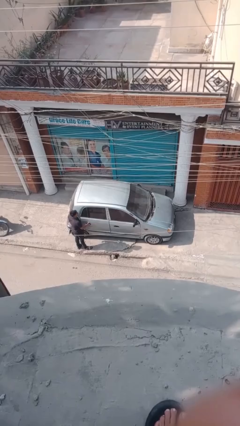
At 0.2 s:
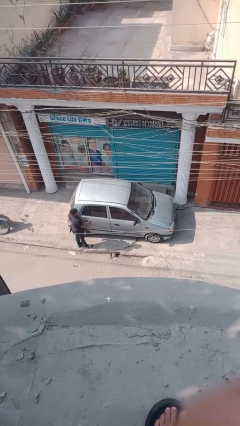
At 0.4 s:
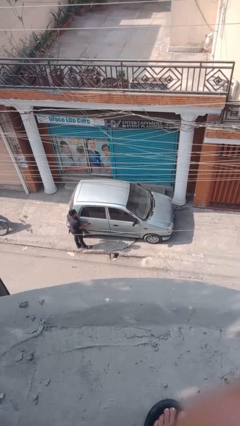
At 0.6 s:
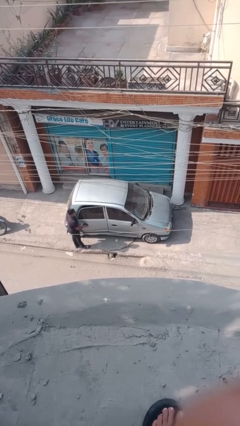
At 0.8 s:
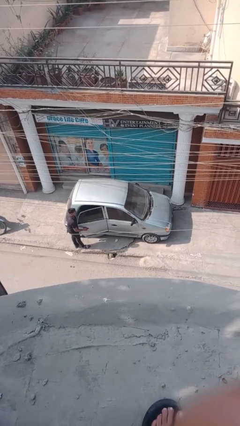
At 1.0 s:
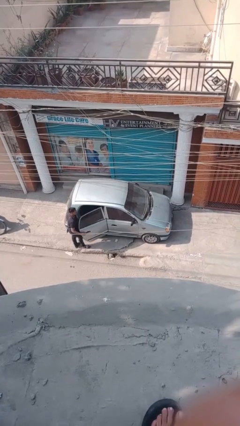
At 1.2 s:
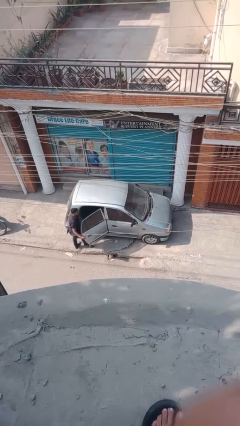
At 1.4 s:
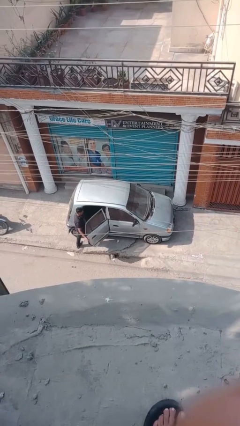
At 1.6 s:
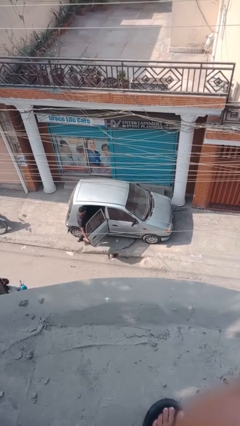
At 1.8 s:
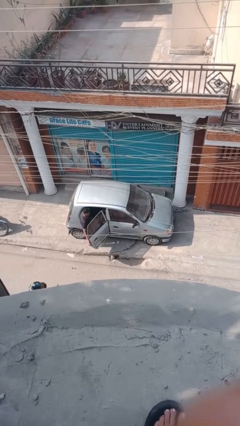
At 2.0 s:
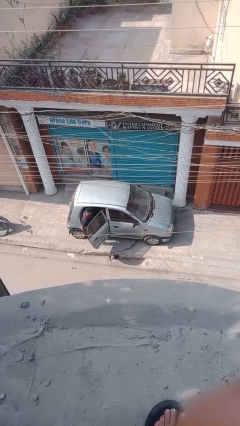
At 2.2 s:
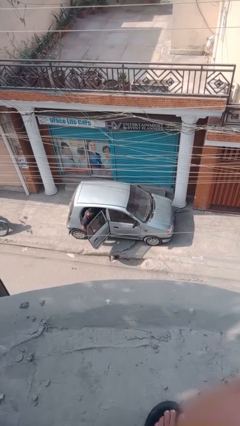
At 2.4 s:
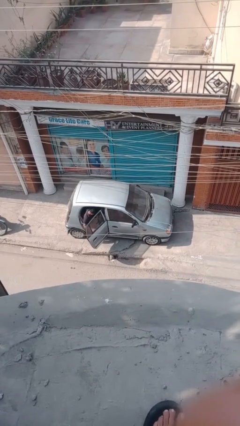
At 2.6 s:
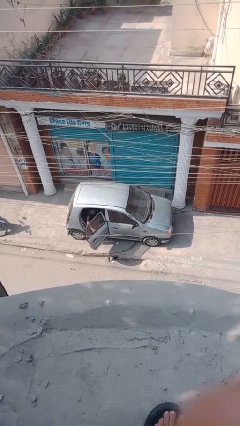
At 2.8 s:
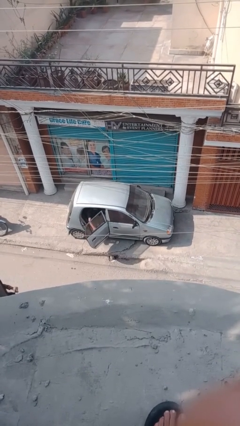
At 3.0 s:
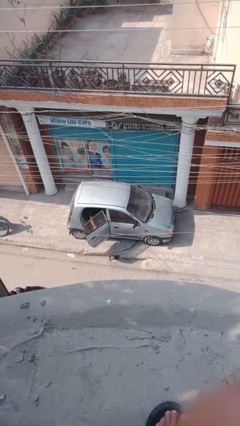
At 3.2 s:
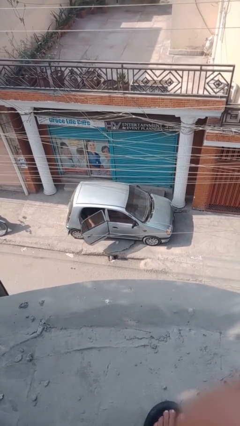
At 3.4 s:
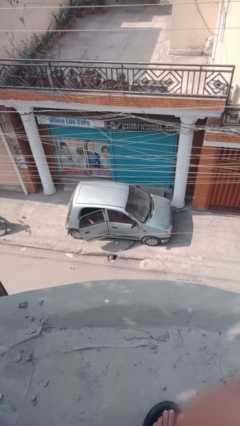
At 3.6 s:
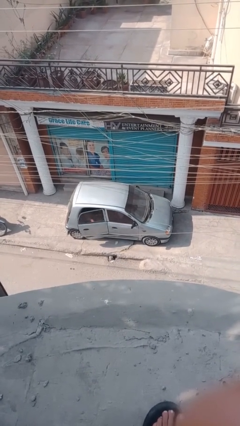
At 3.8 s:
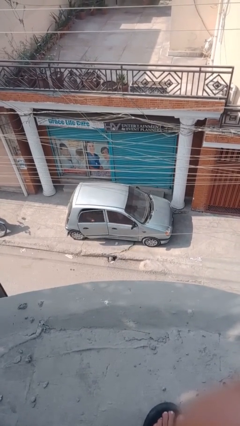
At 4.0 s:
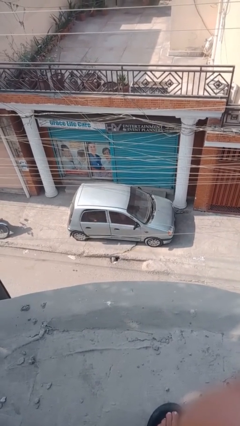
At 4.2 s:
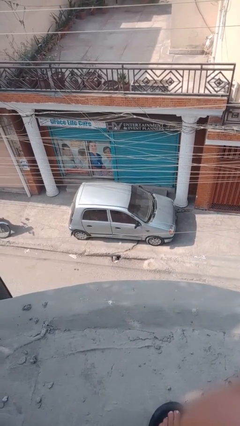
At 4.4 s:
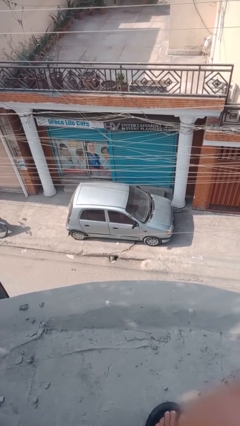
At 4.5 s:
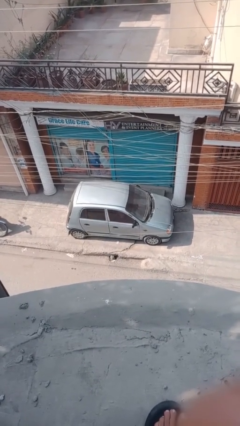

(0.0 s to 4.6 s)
car picks up person

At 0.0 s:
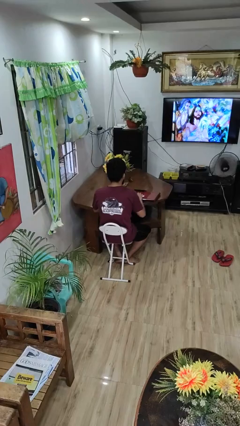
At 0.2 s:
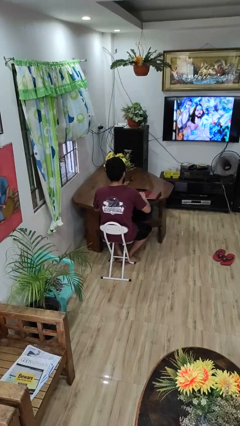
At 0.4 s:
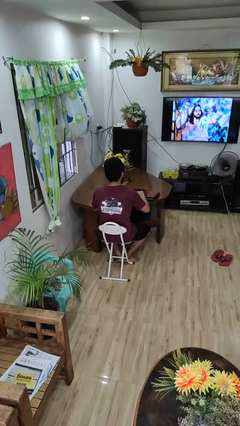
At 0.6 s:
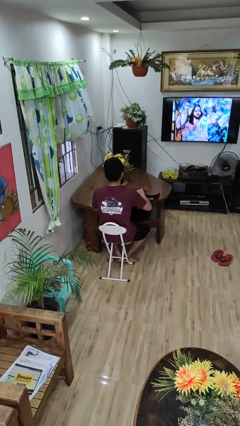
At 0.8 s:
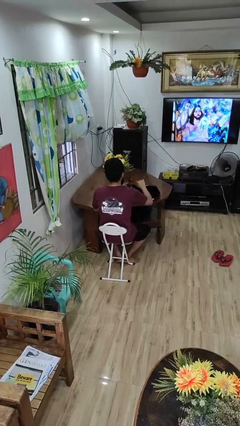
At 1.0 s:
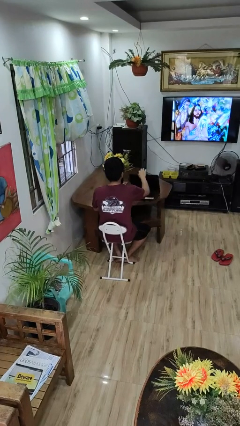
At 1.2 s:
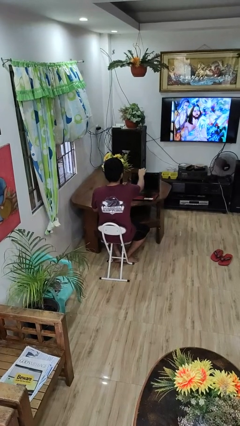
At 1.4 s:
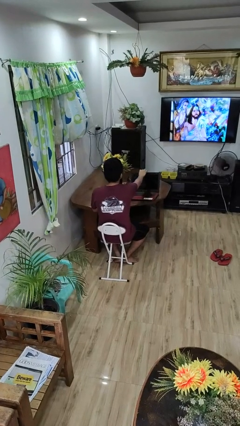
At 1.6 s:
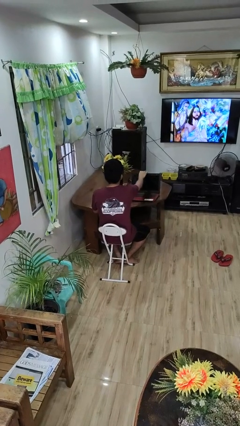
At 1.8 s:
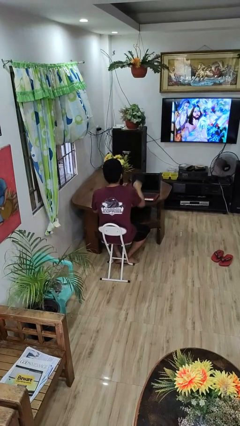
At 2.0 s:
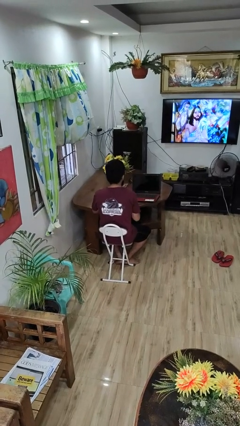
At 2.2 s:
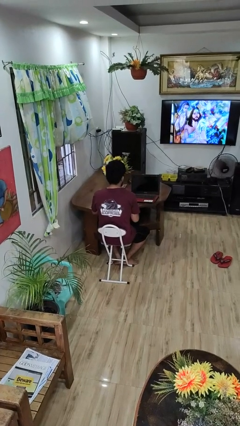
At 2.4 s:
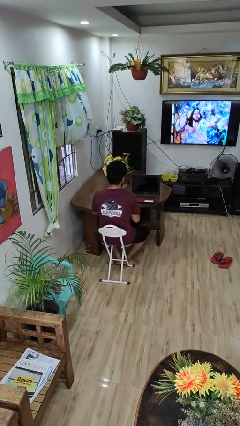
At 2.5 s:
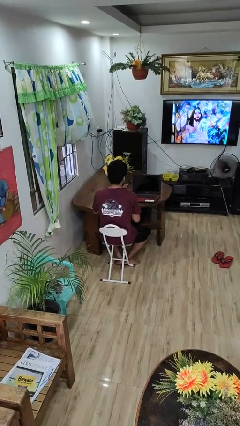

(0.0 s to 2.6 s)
person opens laptop

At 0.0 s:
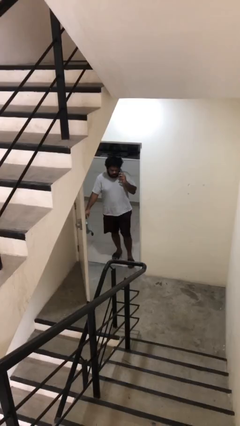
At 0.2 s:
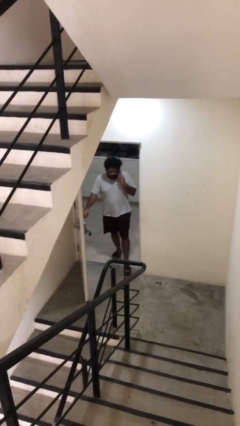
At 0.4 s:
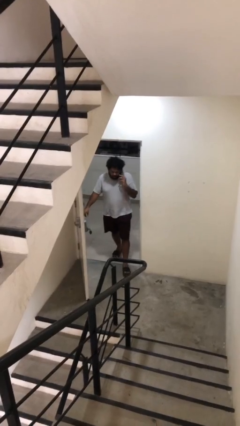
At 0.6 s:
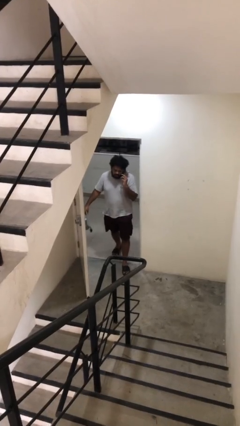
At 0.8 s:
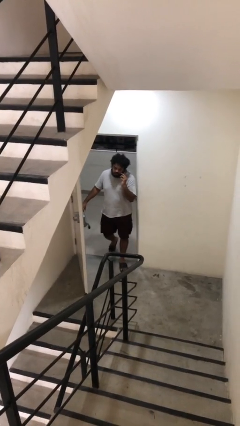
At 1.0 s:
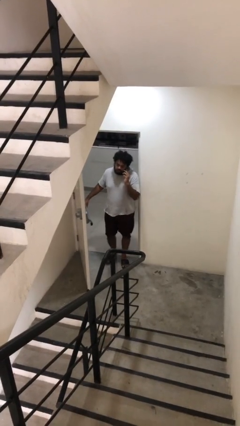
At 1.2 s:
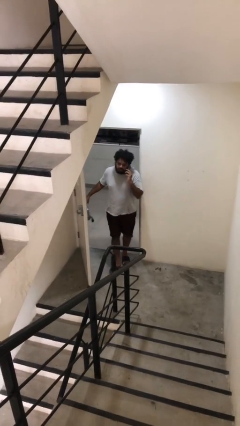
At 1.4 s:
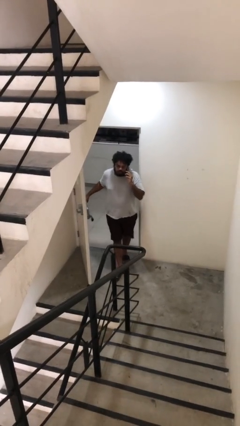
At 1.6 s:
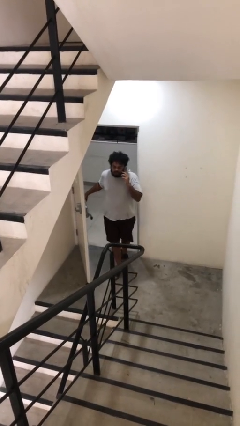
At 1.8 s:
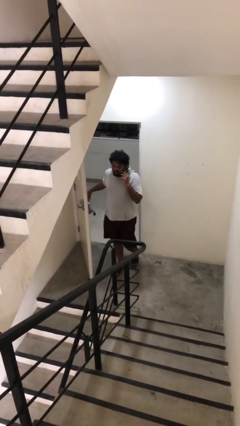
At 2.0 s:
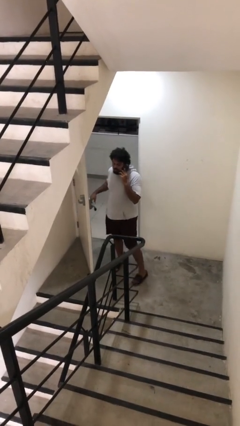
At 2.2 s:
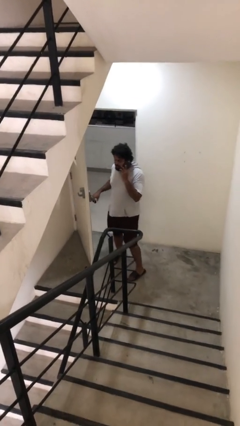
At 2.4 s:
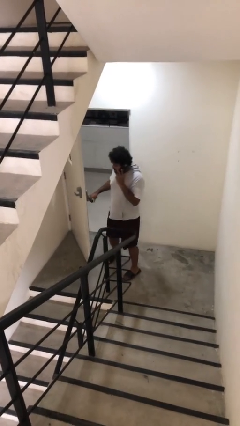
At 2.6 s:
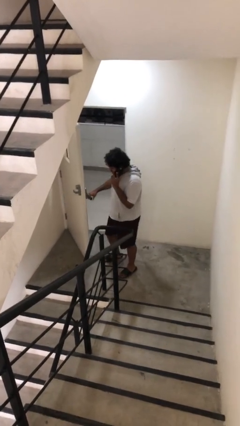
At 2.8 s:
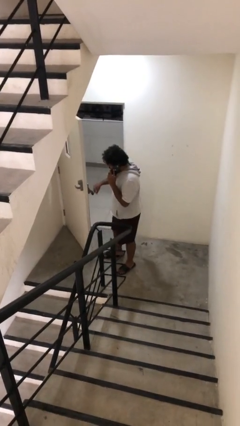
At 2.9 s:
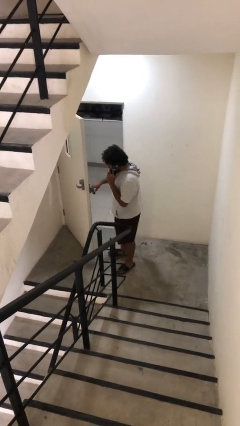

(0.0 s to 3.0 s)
person enters scene through structure

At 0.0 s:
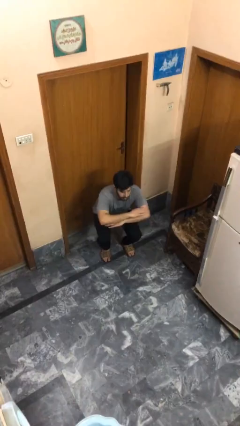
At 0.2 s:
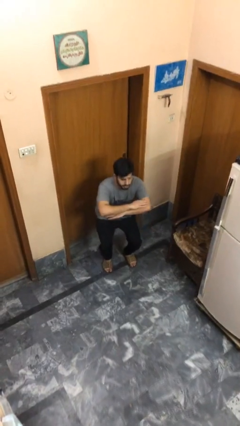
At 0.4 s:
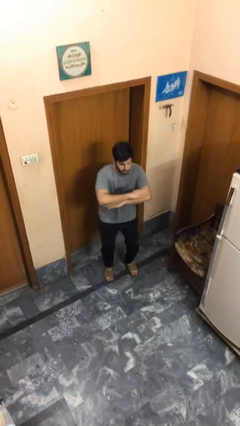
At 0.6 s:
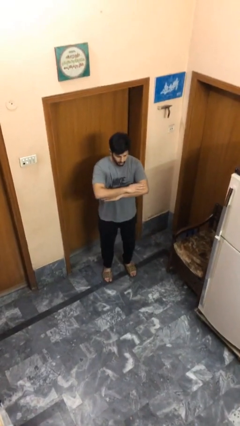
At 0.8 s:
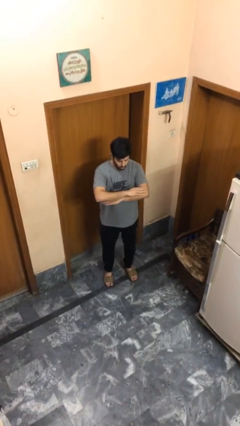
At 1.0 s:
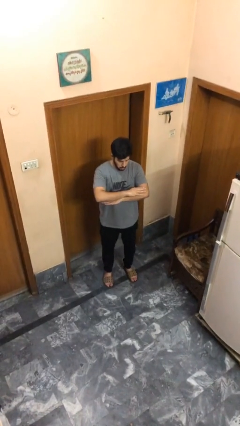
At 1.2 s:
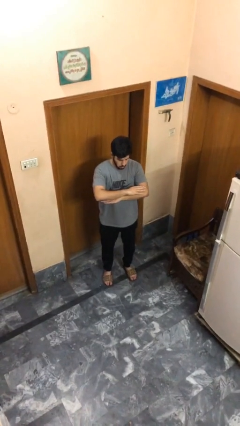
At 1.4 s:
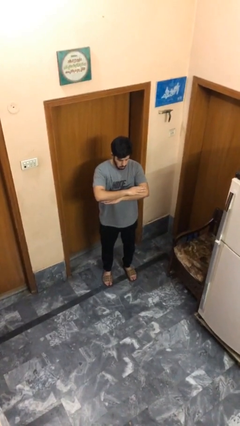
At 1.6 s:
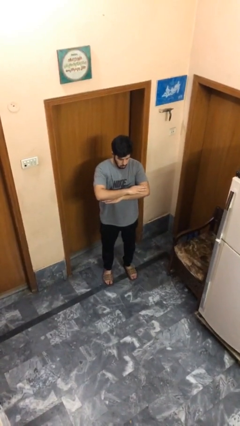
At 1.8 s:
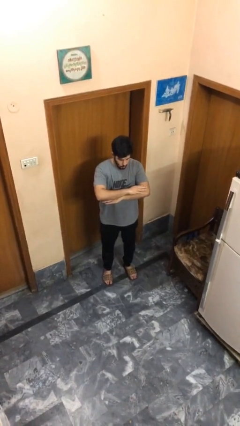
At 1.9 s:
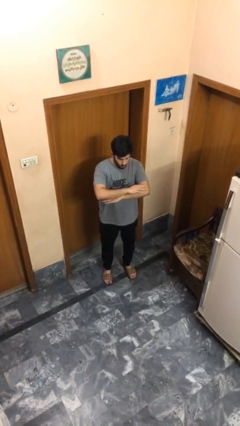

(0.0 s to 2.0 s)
person stands up

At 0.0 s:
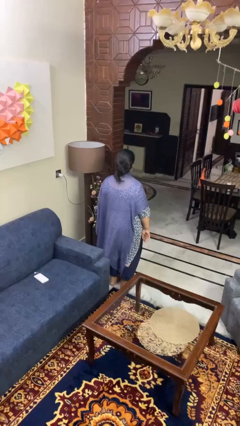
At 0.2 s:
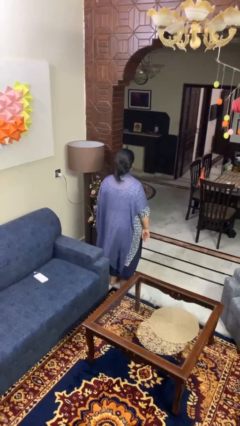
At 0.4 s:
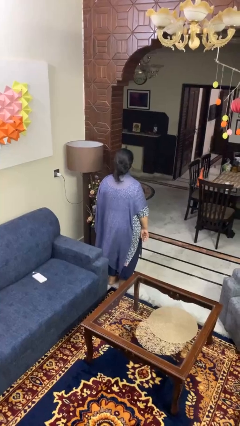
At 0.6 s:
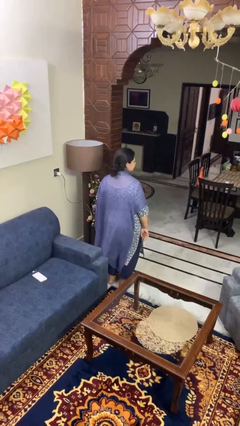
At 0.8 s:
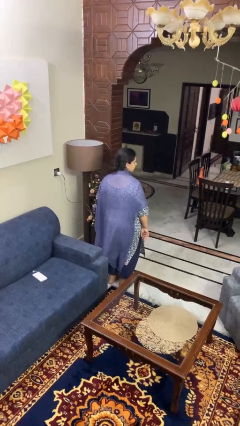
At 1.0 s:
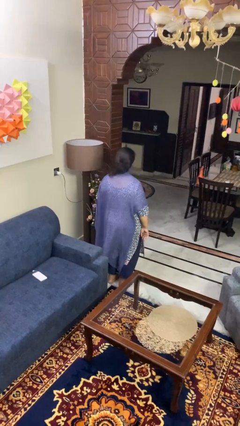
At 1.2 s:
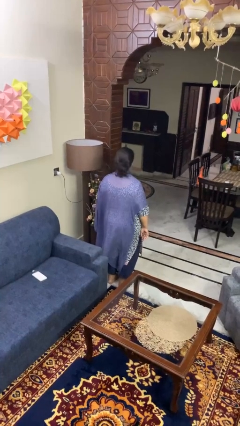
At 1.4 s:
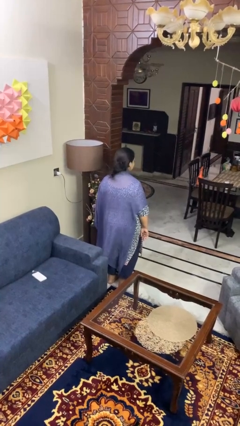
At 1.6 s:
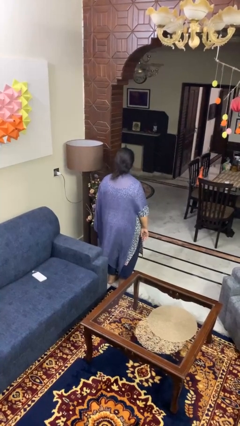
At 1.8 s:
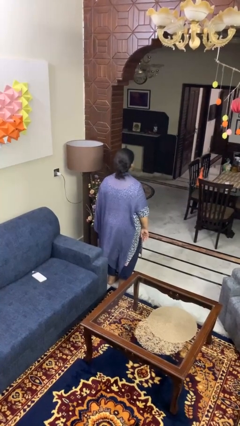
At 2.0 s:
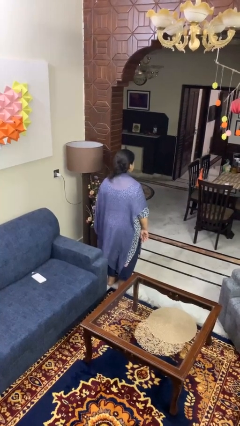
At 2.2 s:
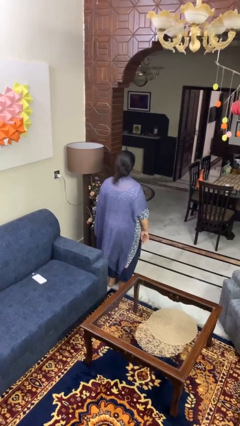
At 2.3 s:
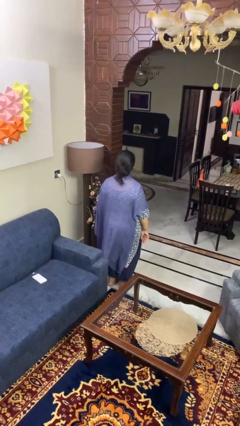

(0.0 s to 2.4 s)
person shakes head

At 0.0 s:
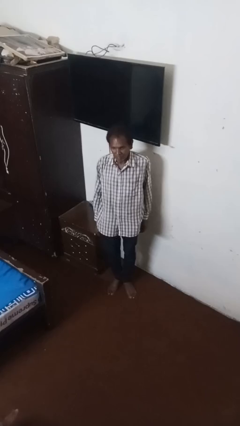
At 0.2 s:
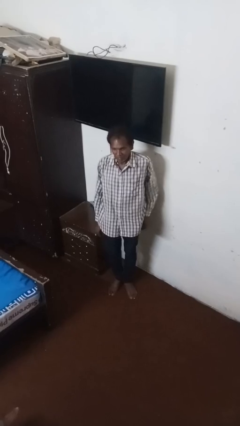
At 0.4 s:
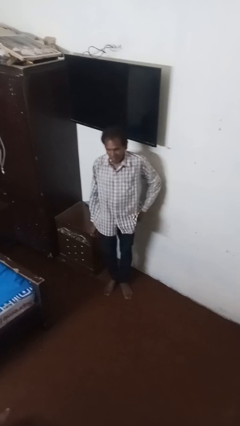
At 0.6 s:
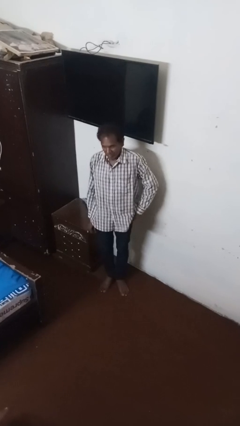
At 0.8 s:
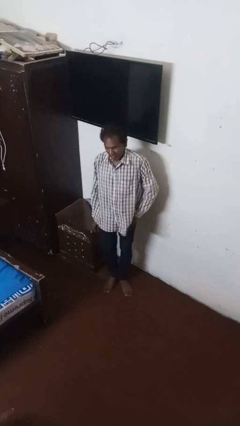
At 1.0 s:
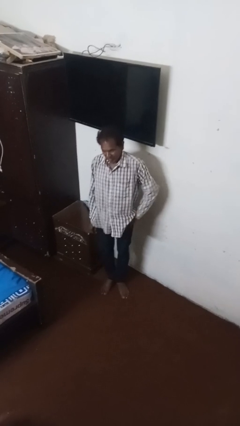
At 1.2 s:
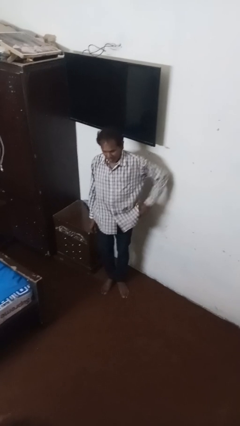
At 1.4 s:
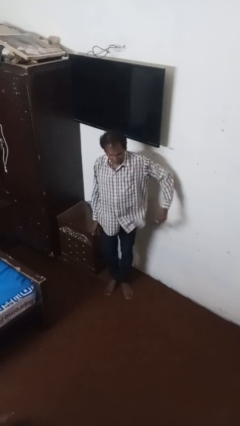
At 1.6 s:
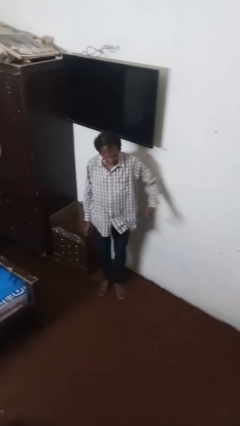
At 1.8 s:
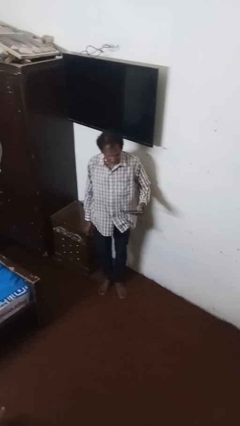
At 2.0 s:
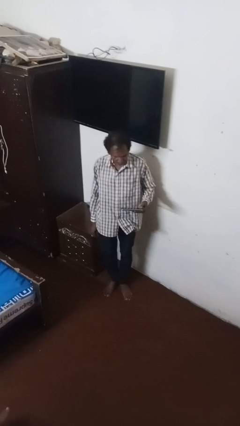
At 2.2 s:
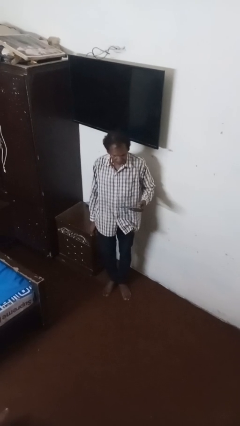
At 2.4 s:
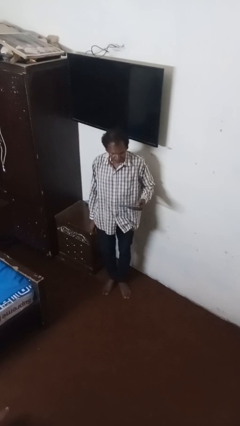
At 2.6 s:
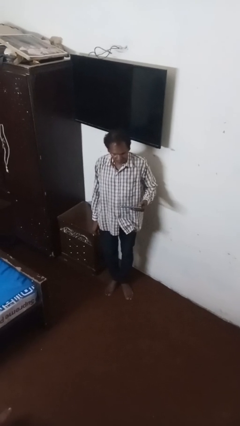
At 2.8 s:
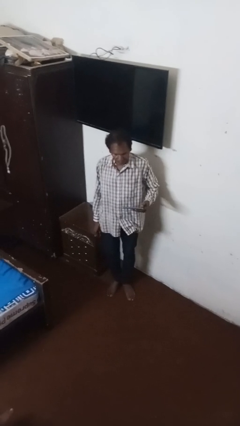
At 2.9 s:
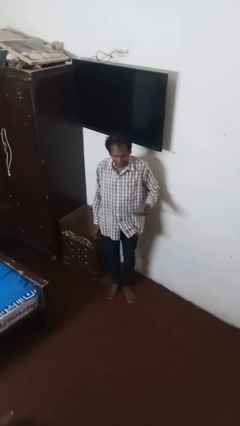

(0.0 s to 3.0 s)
person takes phone from pocket
